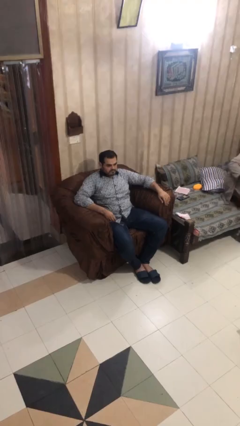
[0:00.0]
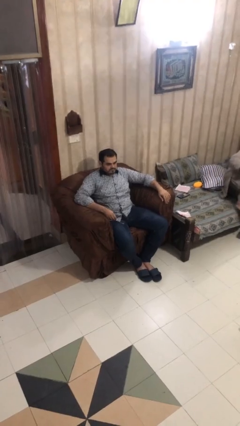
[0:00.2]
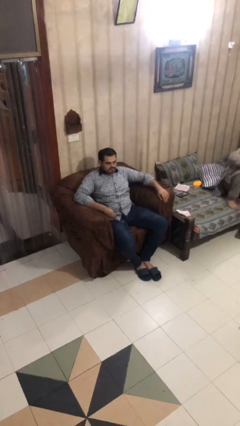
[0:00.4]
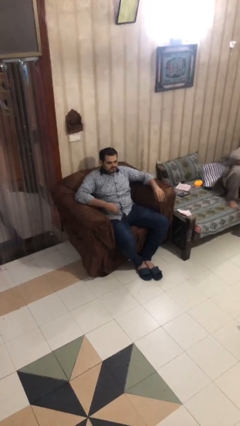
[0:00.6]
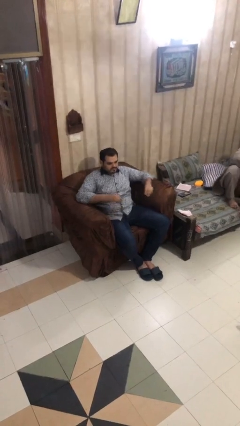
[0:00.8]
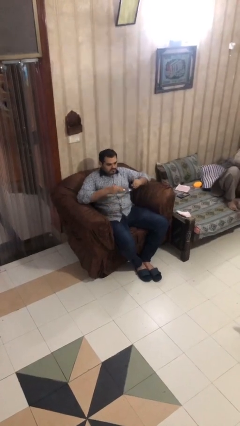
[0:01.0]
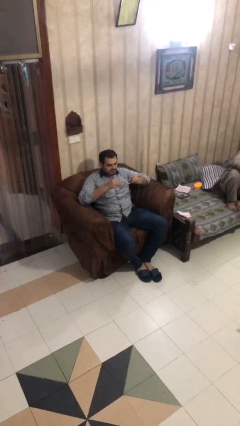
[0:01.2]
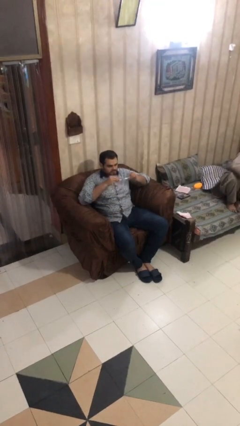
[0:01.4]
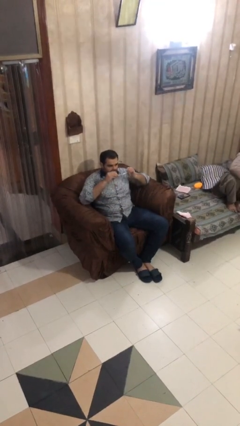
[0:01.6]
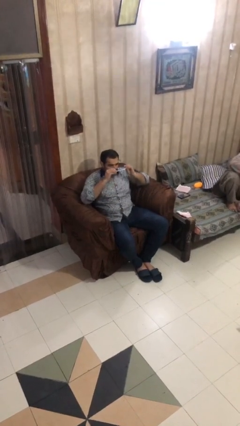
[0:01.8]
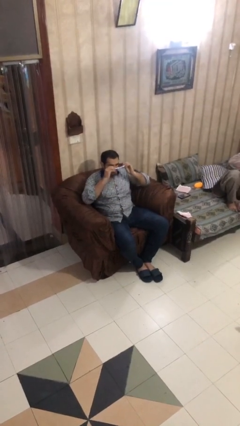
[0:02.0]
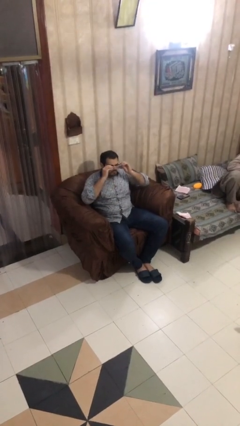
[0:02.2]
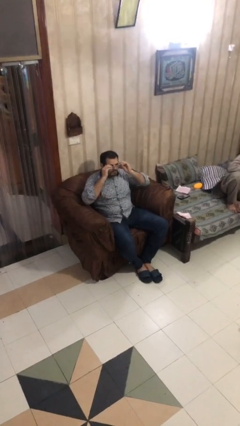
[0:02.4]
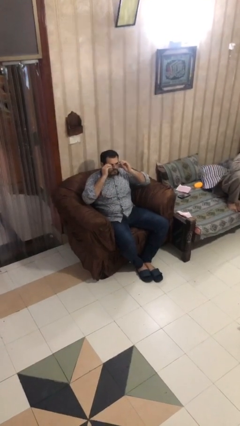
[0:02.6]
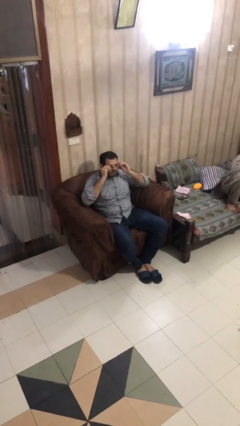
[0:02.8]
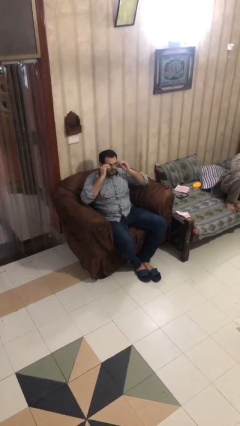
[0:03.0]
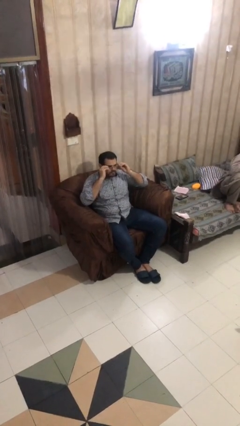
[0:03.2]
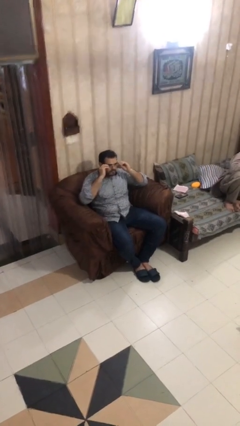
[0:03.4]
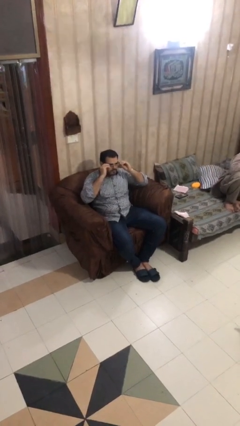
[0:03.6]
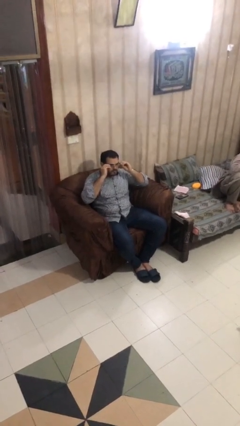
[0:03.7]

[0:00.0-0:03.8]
person puts on glasses

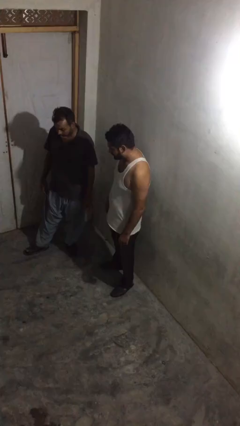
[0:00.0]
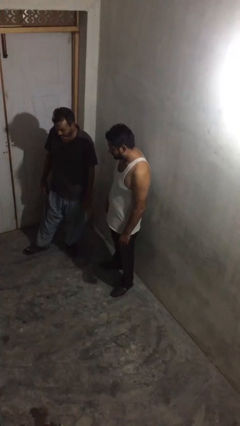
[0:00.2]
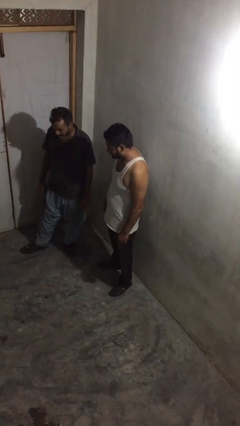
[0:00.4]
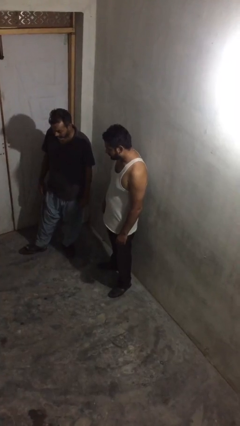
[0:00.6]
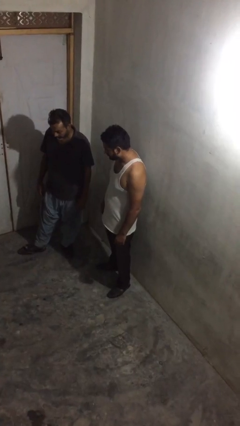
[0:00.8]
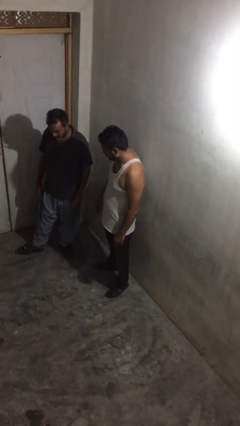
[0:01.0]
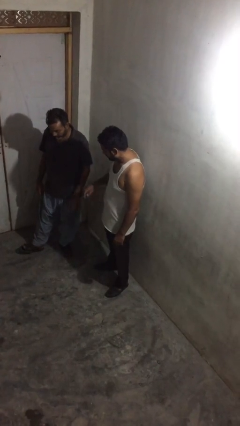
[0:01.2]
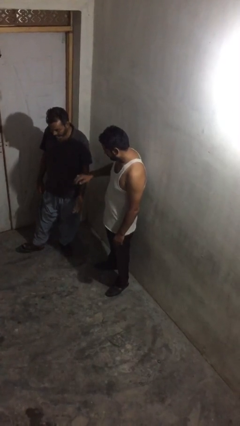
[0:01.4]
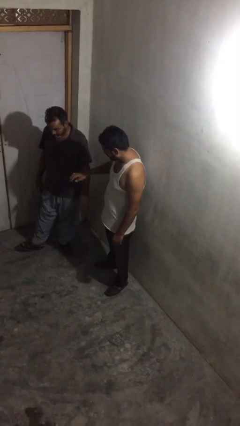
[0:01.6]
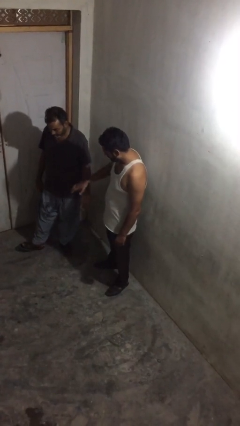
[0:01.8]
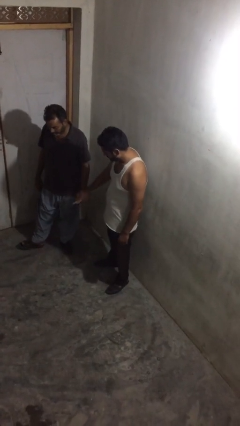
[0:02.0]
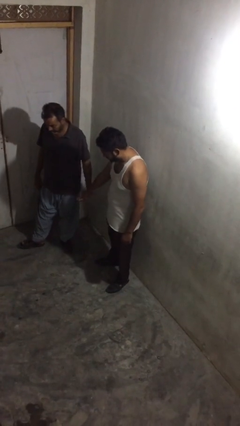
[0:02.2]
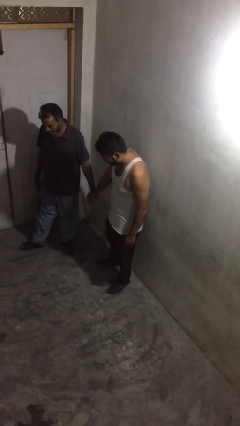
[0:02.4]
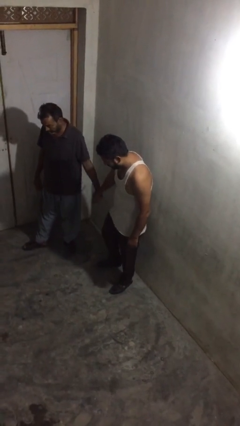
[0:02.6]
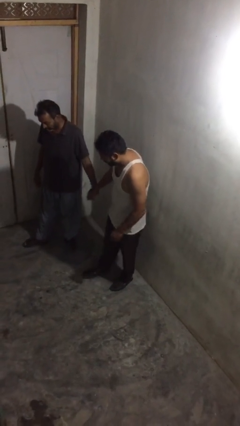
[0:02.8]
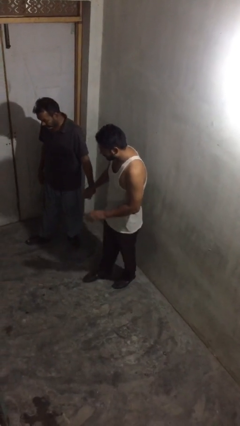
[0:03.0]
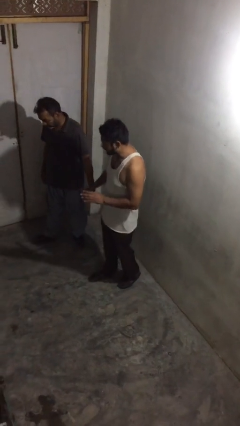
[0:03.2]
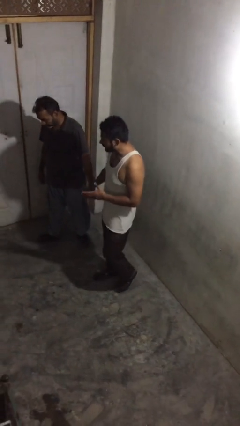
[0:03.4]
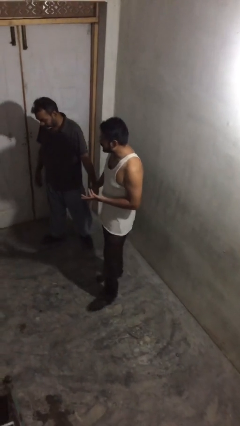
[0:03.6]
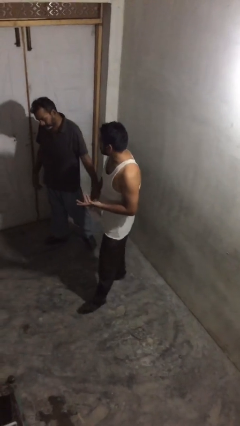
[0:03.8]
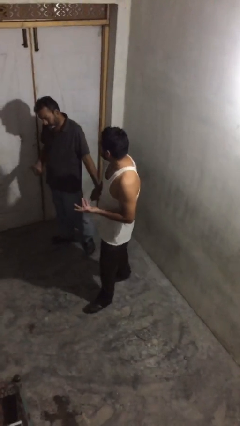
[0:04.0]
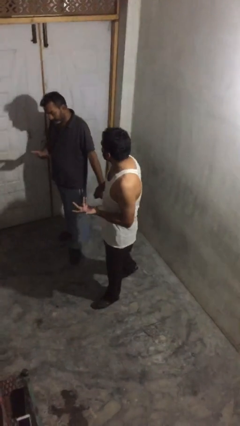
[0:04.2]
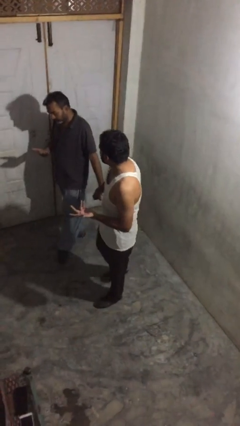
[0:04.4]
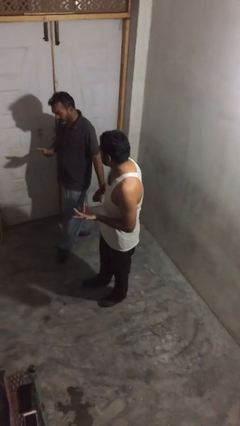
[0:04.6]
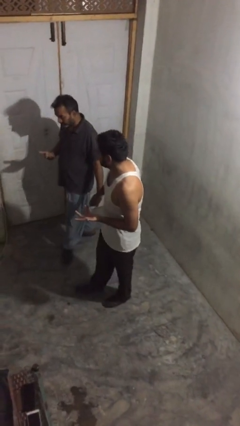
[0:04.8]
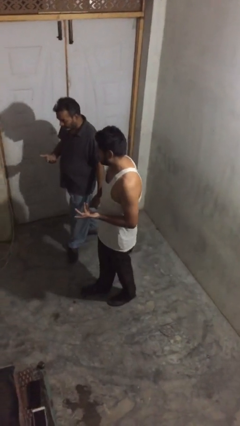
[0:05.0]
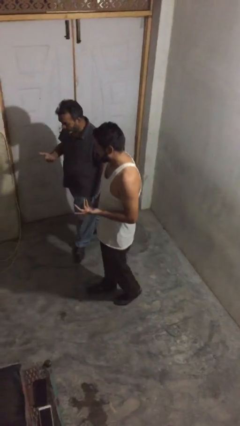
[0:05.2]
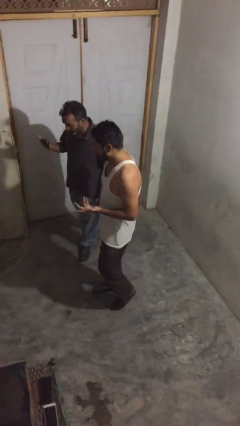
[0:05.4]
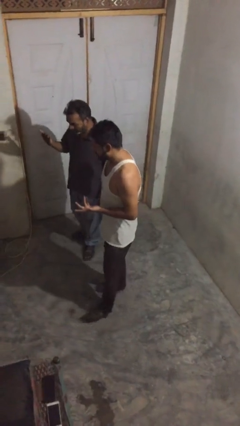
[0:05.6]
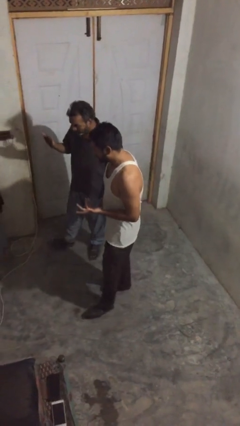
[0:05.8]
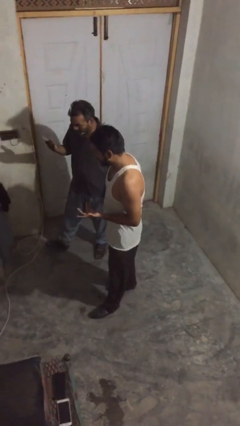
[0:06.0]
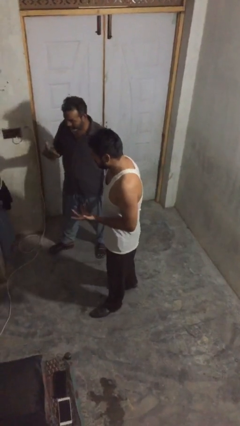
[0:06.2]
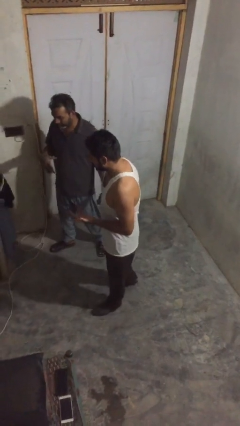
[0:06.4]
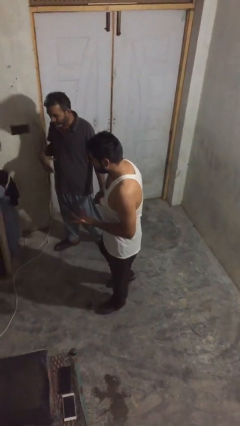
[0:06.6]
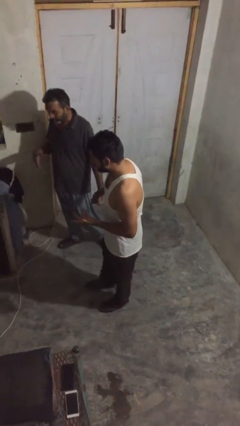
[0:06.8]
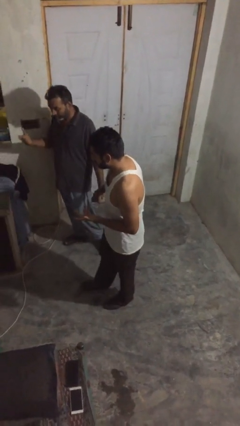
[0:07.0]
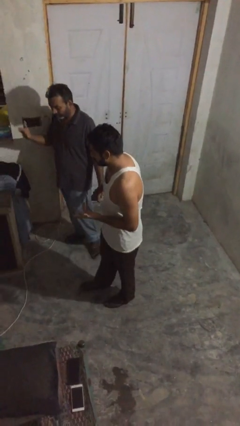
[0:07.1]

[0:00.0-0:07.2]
person holds hand

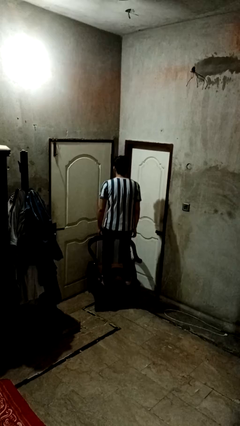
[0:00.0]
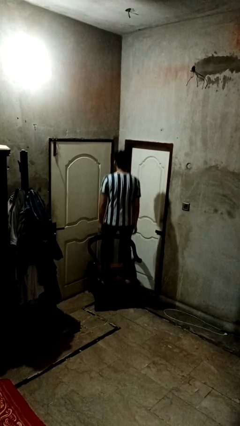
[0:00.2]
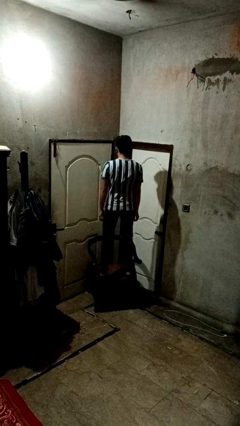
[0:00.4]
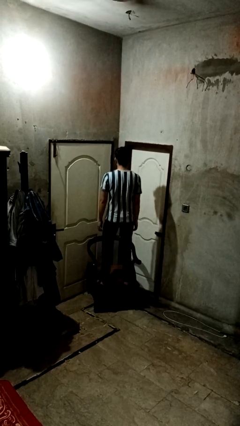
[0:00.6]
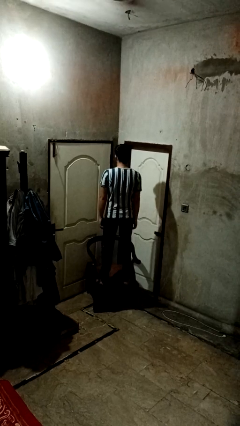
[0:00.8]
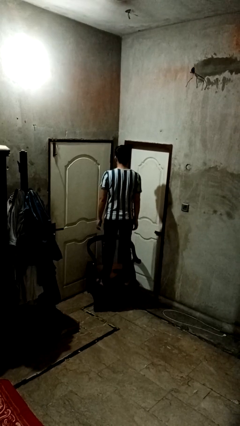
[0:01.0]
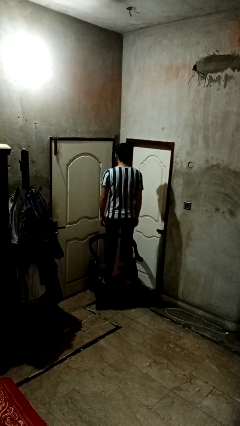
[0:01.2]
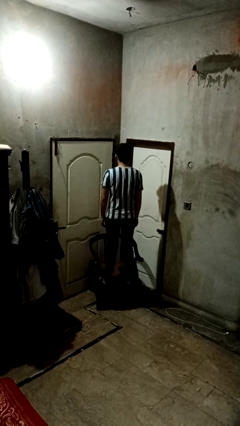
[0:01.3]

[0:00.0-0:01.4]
person jumps on couch

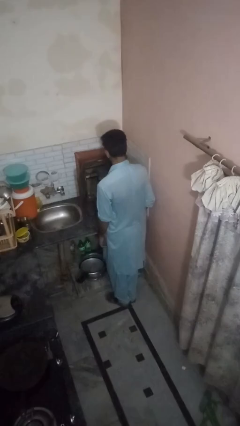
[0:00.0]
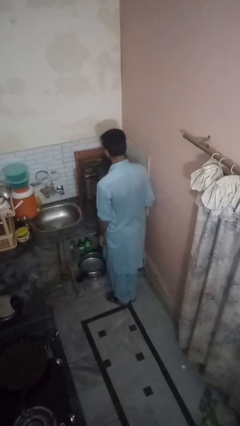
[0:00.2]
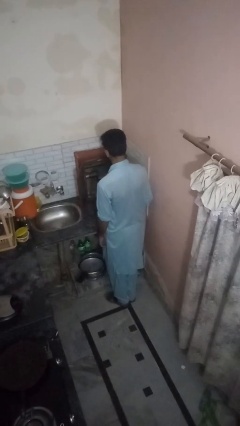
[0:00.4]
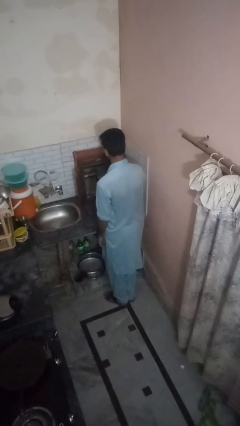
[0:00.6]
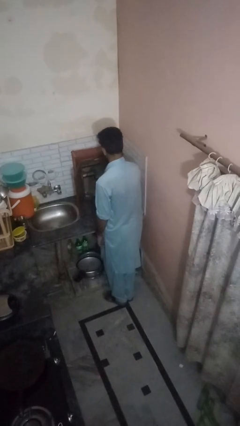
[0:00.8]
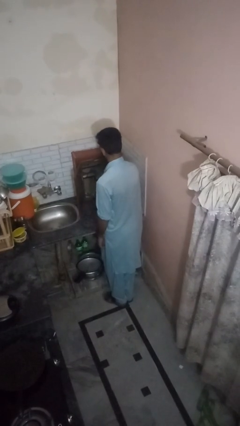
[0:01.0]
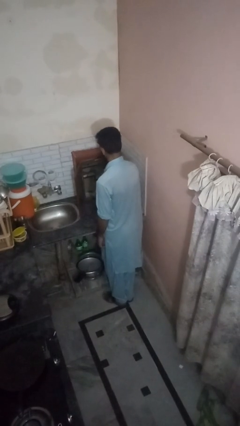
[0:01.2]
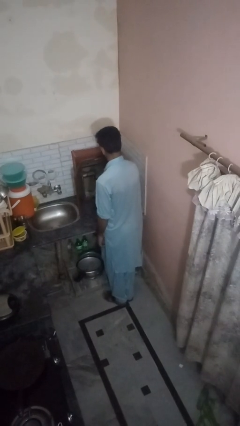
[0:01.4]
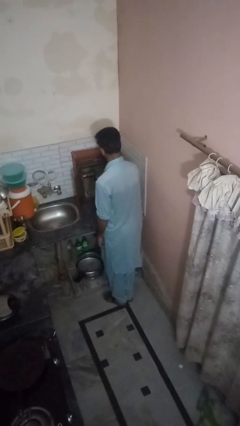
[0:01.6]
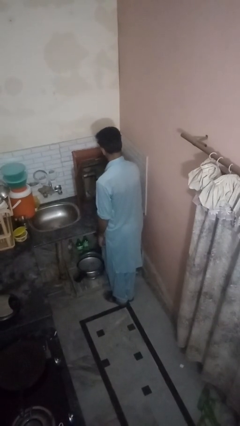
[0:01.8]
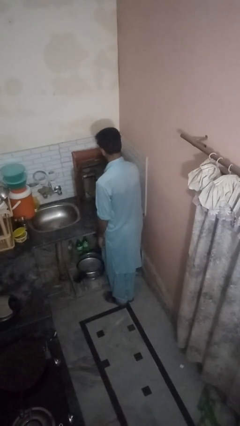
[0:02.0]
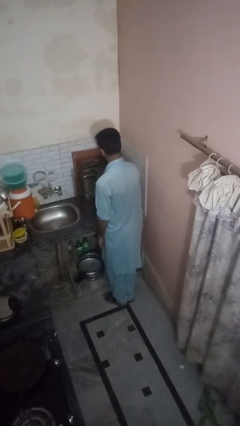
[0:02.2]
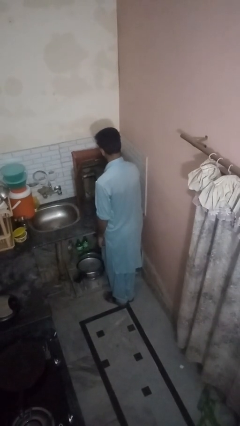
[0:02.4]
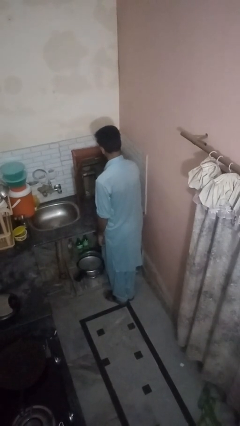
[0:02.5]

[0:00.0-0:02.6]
person searches in kitchen drawer

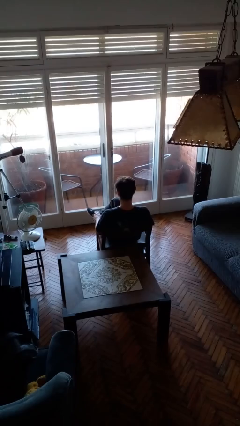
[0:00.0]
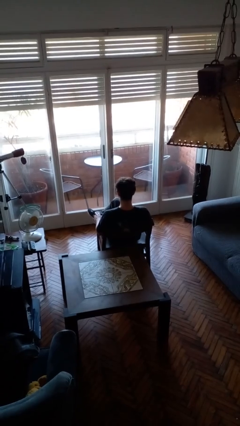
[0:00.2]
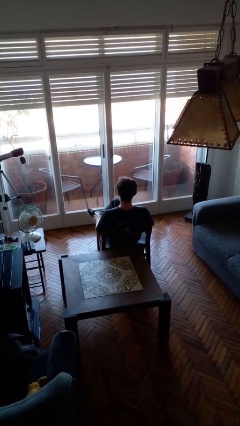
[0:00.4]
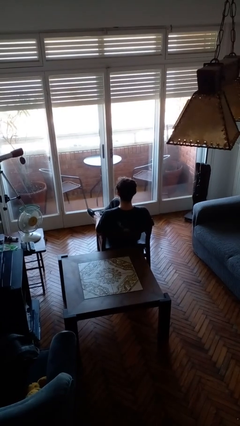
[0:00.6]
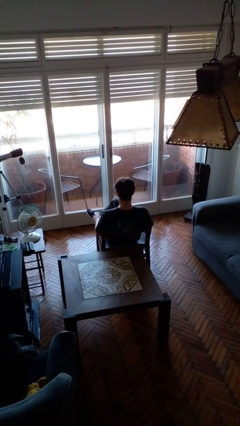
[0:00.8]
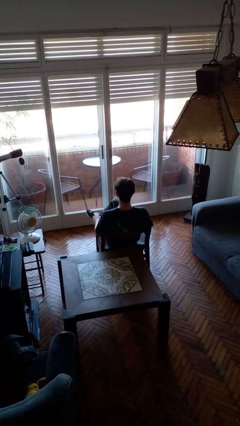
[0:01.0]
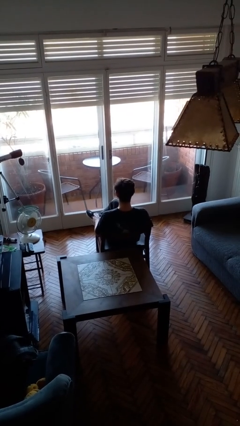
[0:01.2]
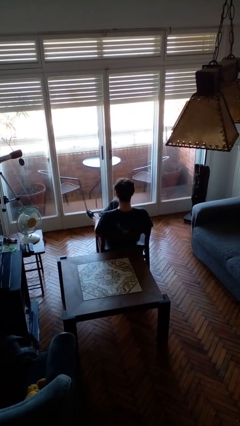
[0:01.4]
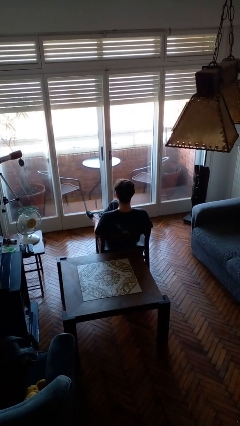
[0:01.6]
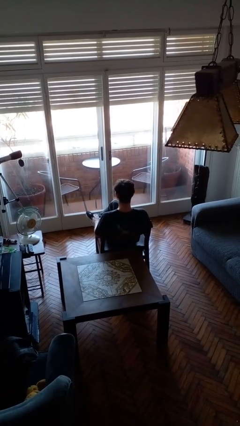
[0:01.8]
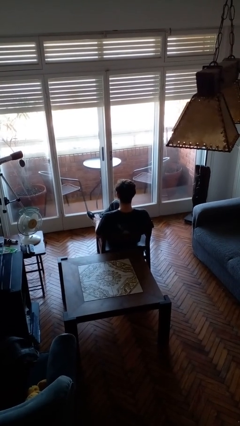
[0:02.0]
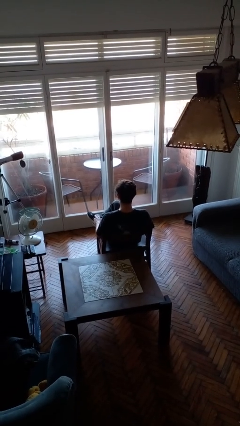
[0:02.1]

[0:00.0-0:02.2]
person nods head

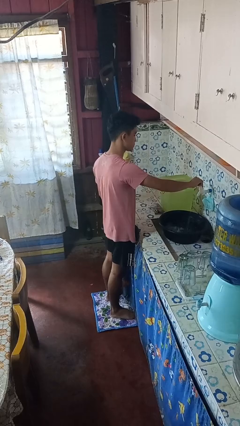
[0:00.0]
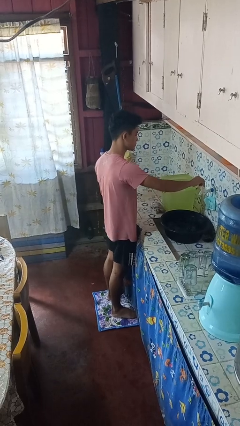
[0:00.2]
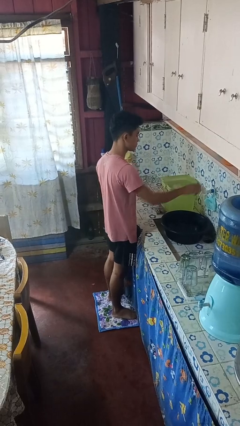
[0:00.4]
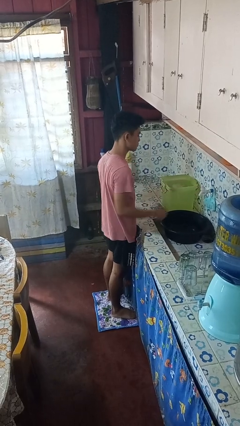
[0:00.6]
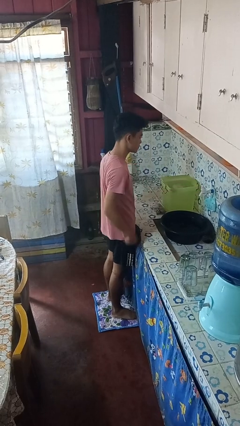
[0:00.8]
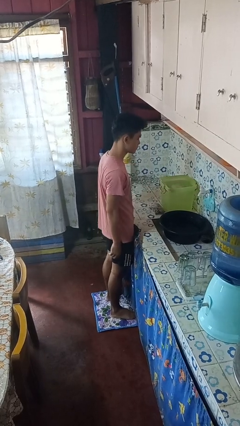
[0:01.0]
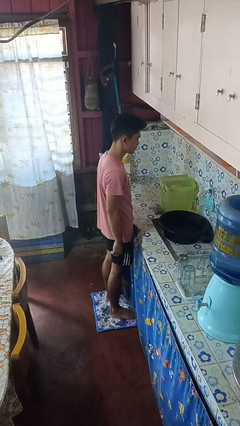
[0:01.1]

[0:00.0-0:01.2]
person turns off faucet
